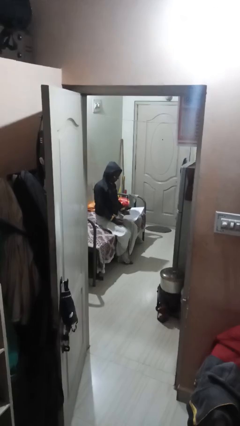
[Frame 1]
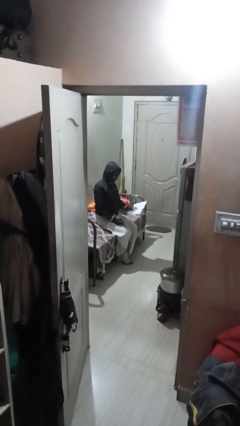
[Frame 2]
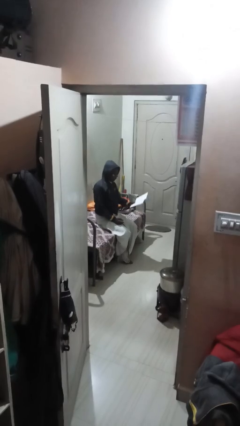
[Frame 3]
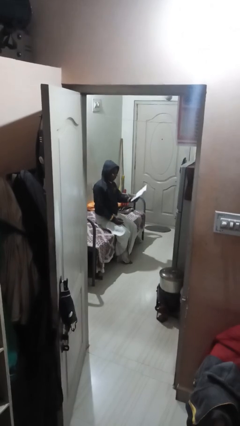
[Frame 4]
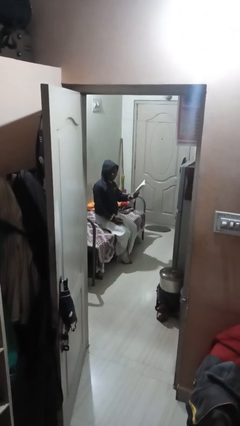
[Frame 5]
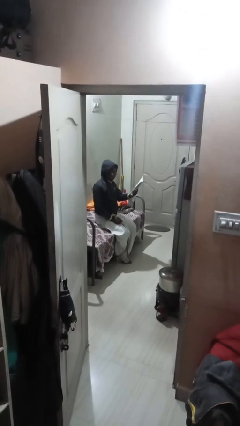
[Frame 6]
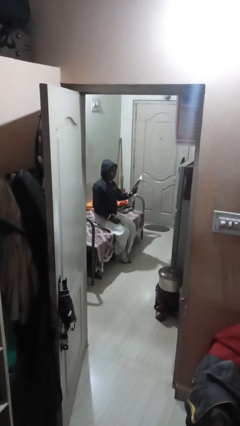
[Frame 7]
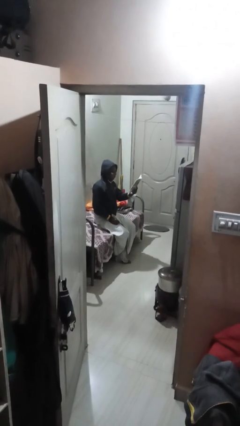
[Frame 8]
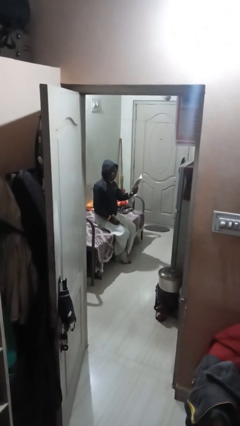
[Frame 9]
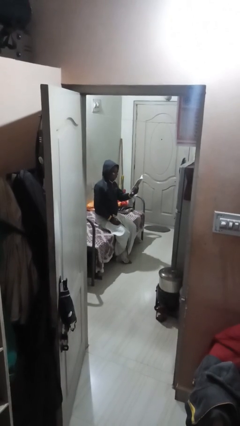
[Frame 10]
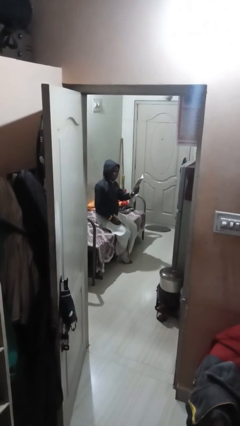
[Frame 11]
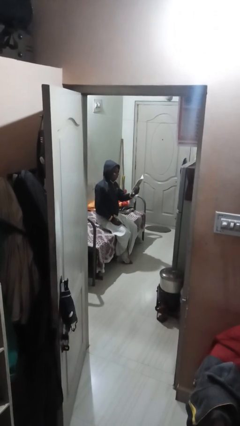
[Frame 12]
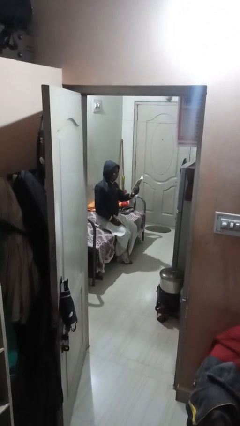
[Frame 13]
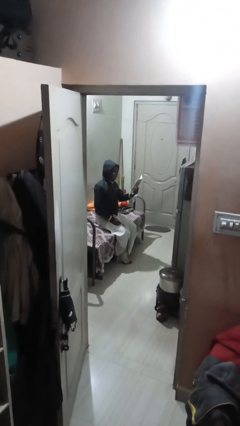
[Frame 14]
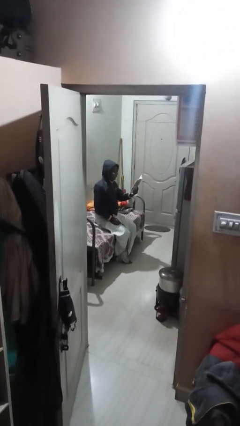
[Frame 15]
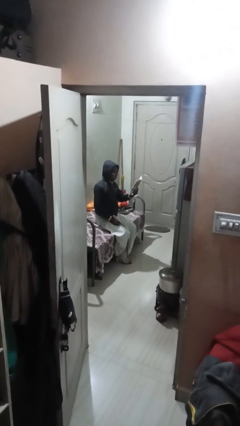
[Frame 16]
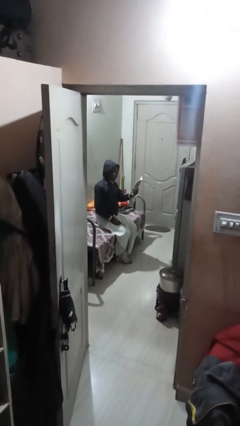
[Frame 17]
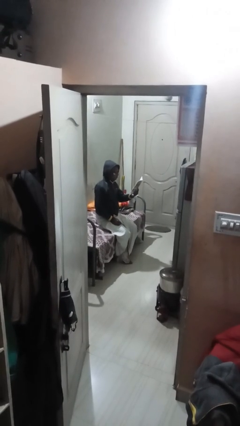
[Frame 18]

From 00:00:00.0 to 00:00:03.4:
person reads document

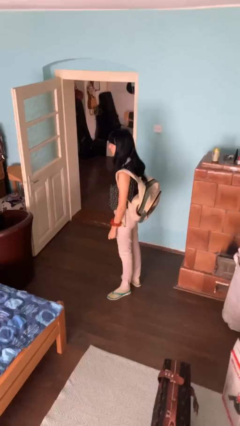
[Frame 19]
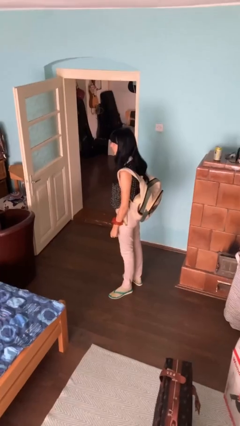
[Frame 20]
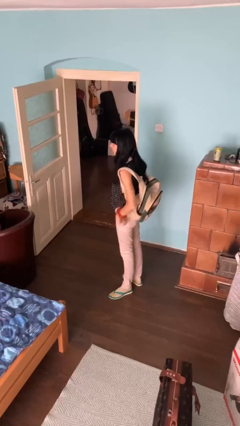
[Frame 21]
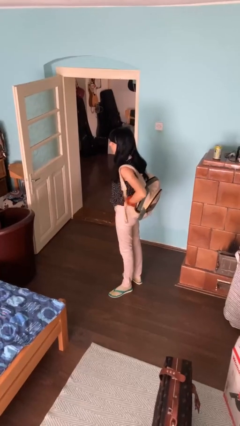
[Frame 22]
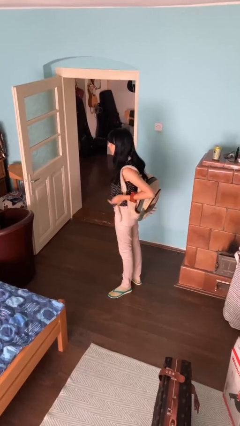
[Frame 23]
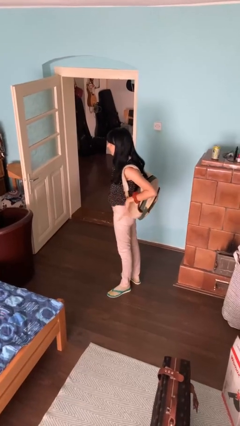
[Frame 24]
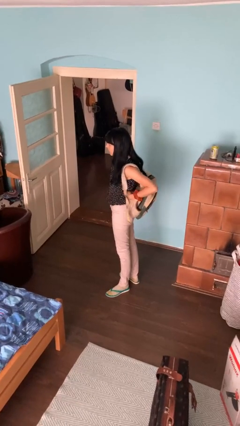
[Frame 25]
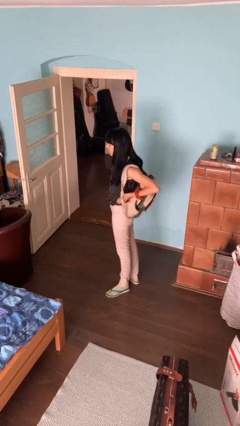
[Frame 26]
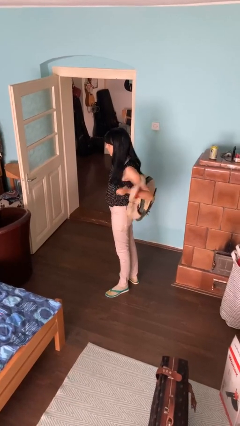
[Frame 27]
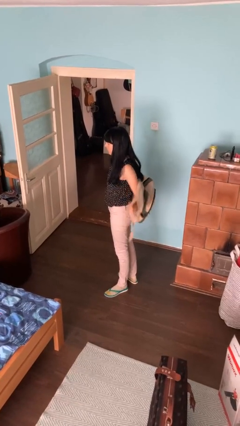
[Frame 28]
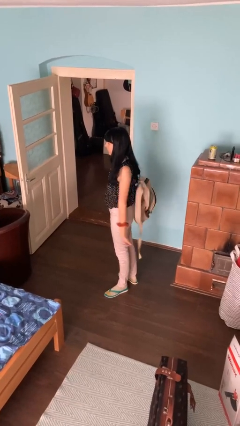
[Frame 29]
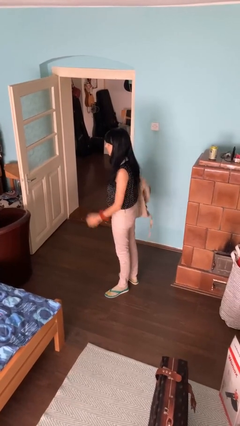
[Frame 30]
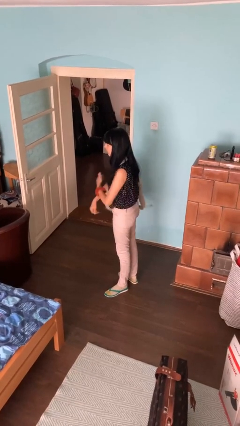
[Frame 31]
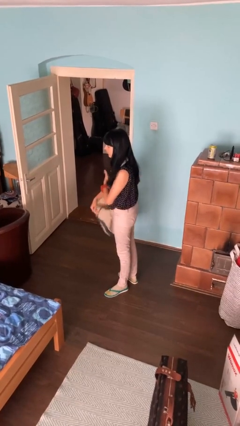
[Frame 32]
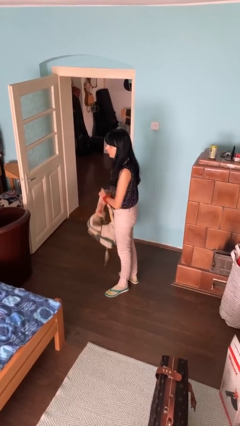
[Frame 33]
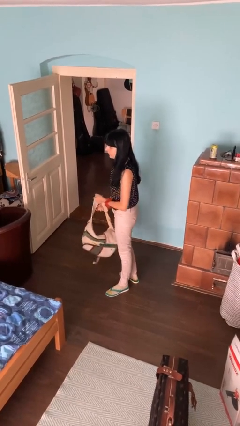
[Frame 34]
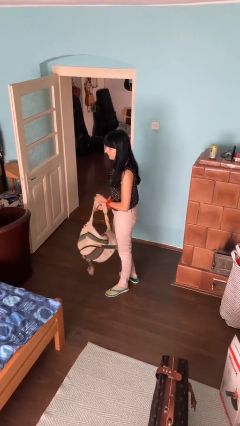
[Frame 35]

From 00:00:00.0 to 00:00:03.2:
person takes off backpack

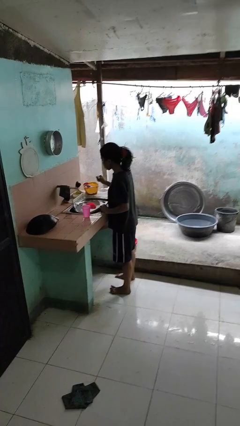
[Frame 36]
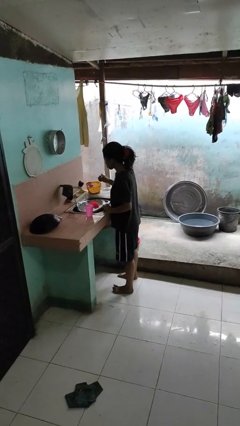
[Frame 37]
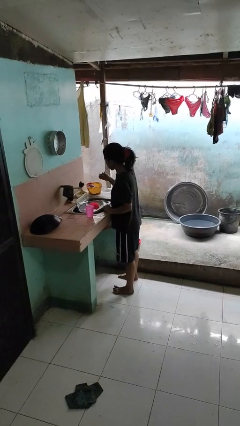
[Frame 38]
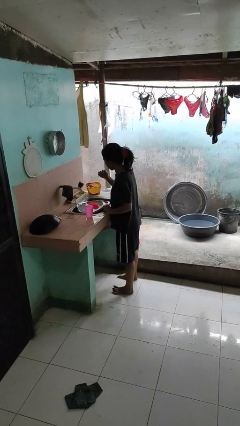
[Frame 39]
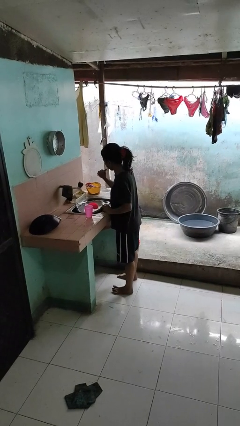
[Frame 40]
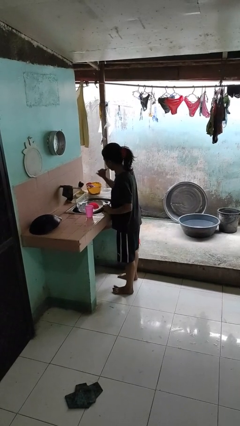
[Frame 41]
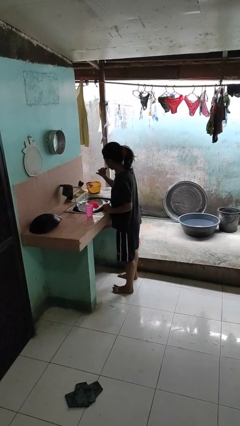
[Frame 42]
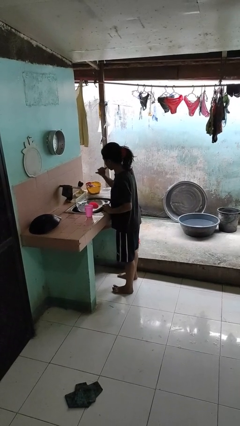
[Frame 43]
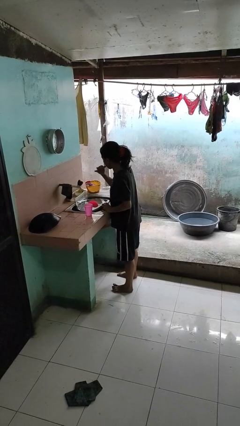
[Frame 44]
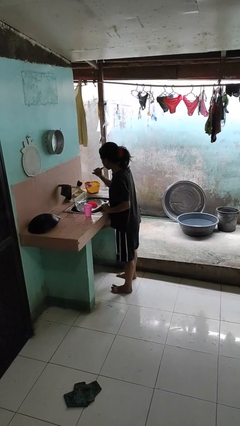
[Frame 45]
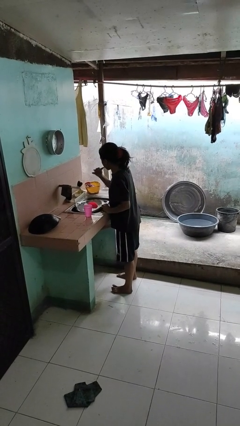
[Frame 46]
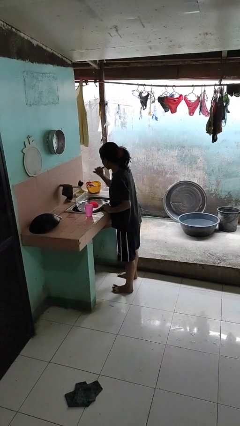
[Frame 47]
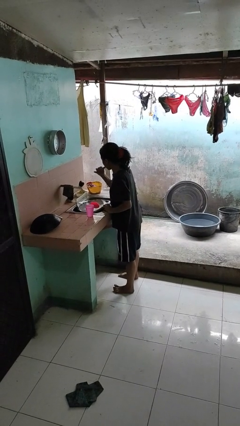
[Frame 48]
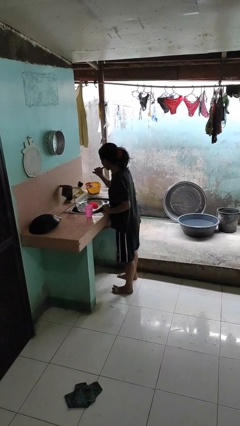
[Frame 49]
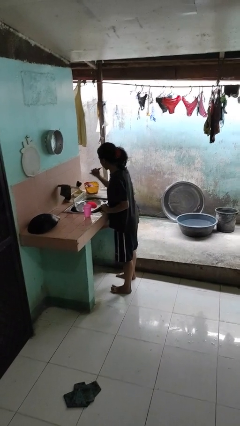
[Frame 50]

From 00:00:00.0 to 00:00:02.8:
person brushes teeth

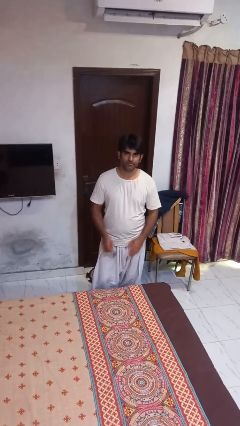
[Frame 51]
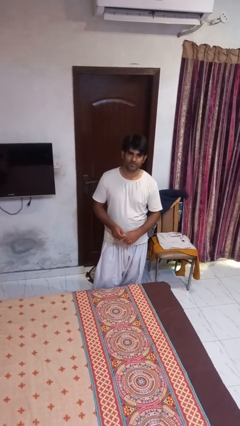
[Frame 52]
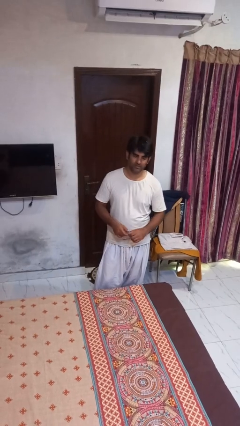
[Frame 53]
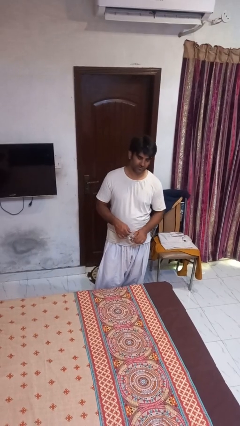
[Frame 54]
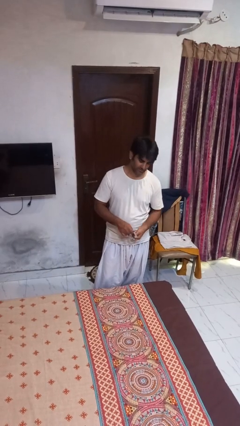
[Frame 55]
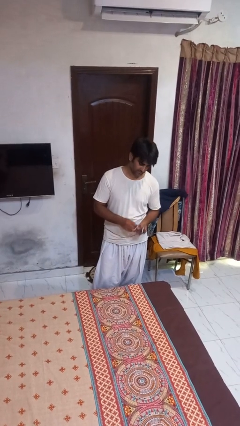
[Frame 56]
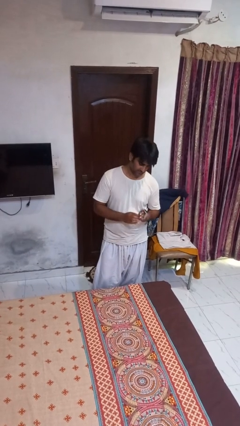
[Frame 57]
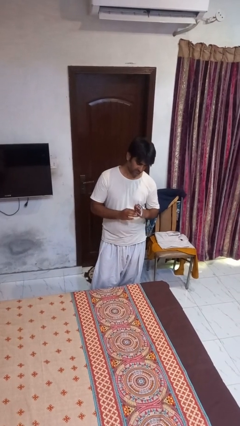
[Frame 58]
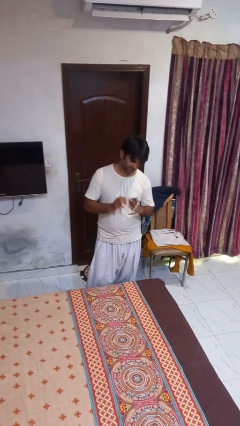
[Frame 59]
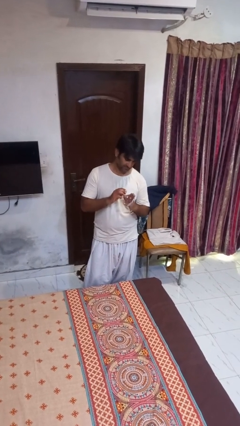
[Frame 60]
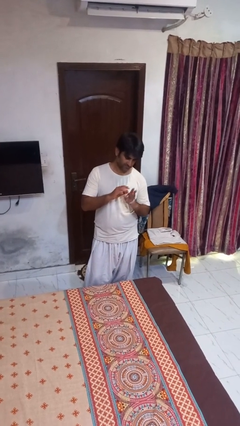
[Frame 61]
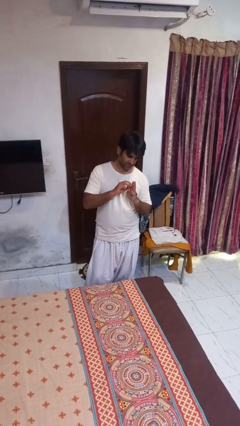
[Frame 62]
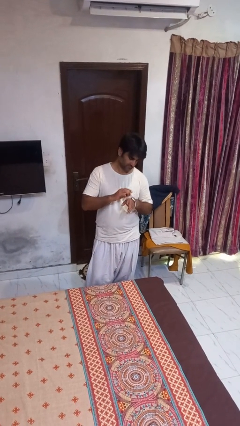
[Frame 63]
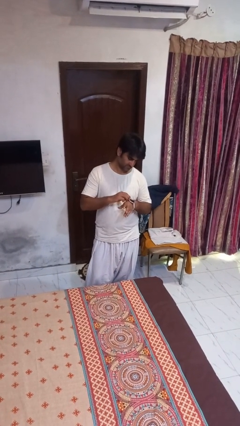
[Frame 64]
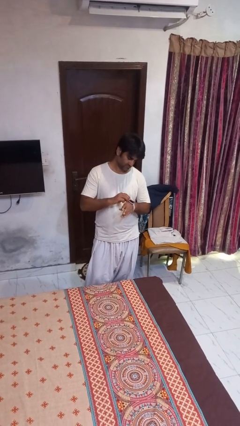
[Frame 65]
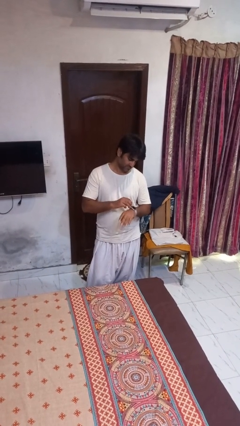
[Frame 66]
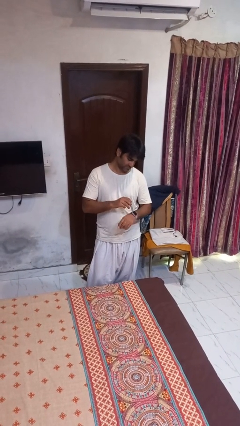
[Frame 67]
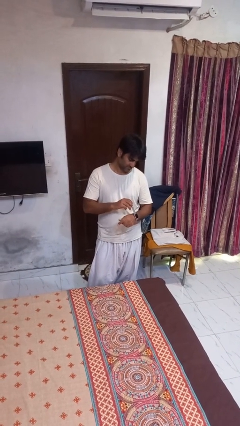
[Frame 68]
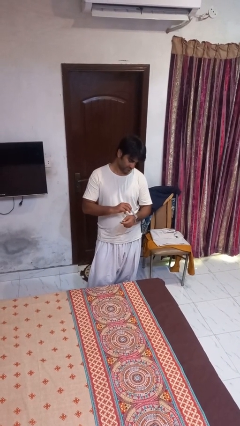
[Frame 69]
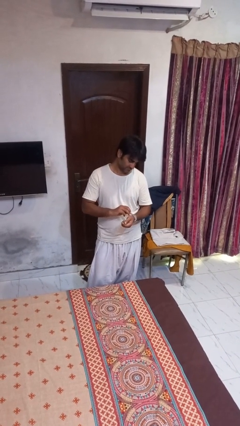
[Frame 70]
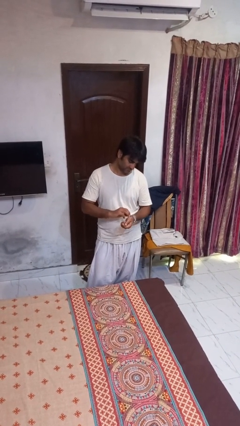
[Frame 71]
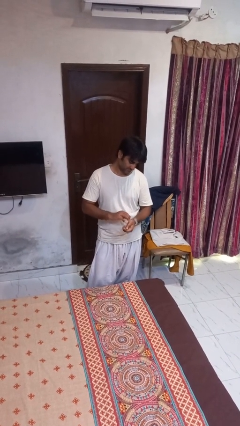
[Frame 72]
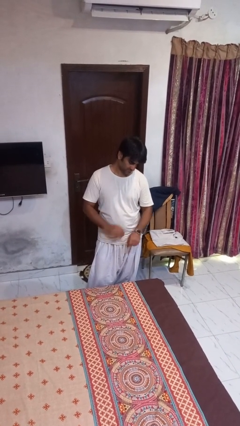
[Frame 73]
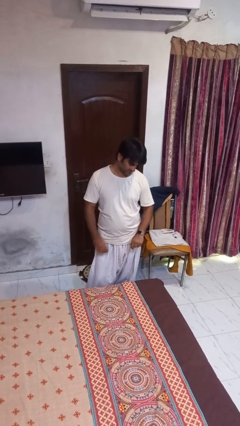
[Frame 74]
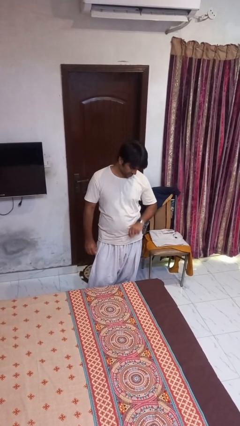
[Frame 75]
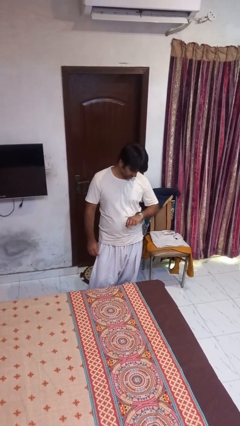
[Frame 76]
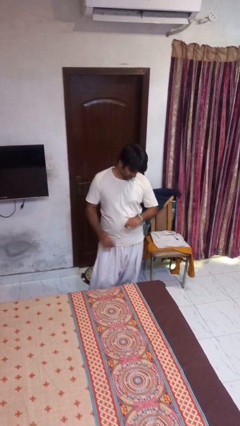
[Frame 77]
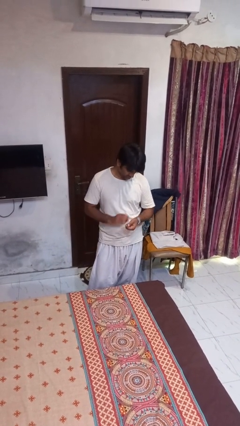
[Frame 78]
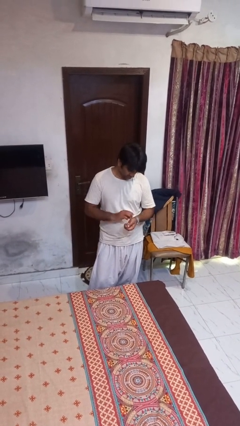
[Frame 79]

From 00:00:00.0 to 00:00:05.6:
person puts on wristwatch

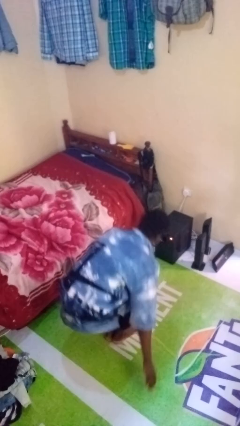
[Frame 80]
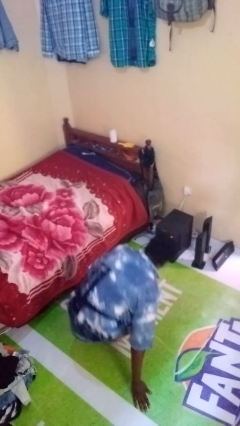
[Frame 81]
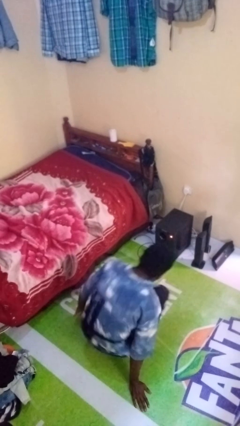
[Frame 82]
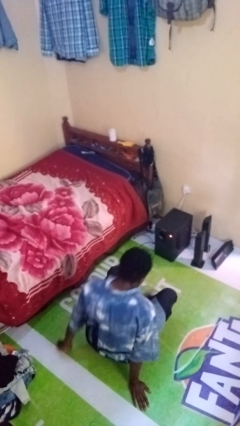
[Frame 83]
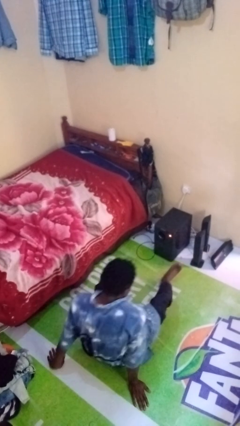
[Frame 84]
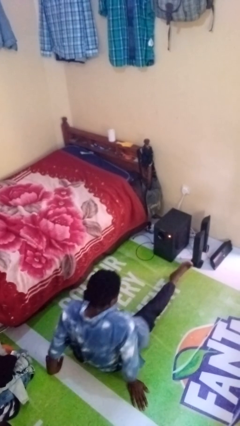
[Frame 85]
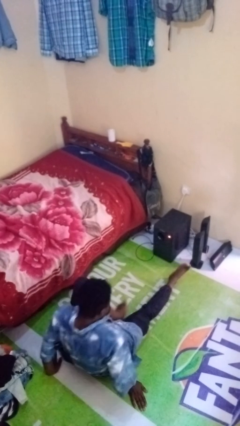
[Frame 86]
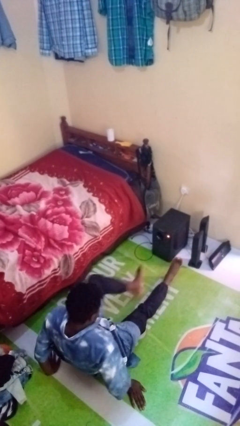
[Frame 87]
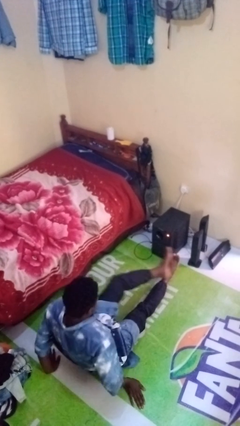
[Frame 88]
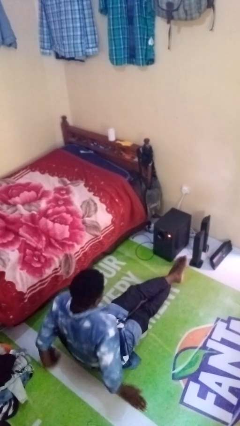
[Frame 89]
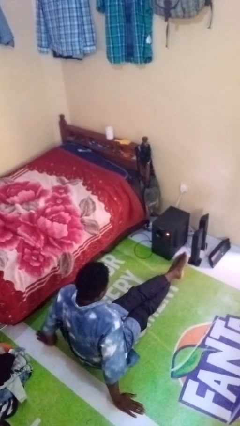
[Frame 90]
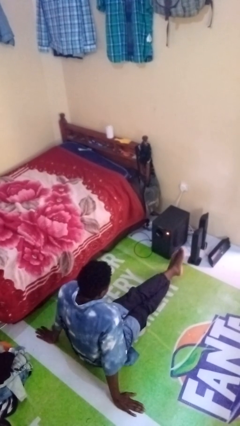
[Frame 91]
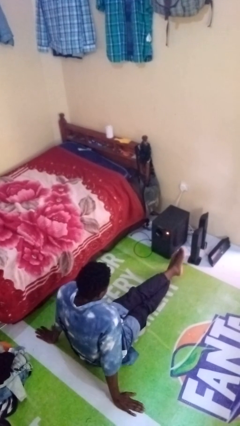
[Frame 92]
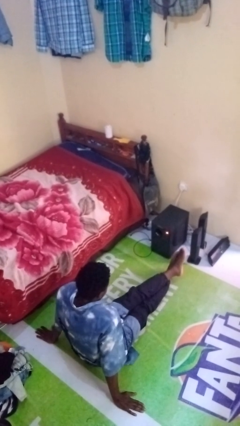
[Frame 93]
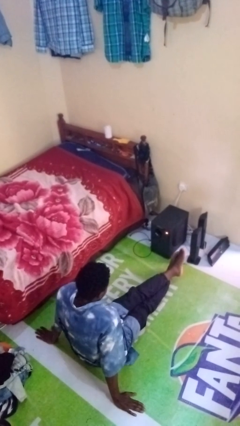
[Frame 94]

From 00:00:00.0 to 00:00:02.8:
person sits crisscross
